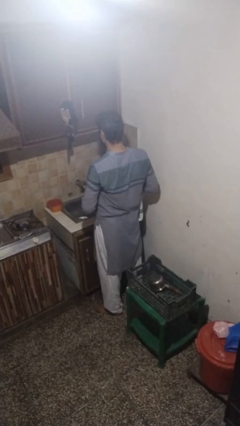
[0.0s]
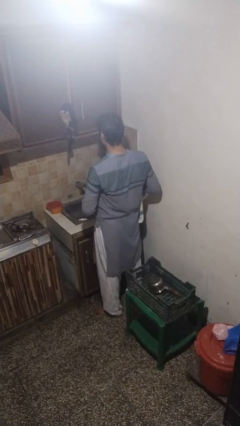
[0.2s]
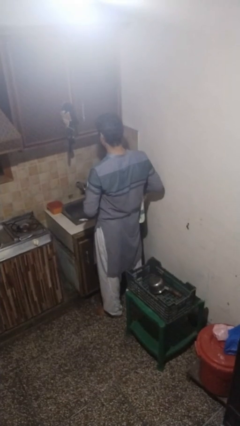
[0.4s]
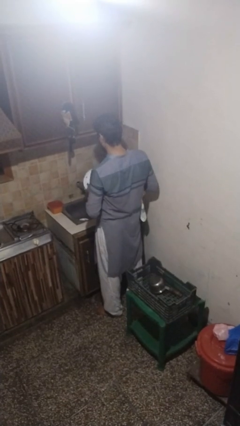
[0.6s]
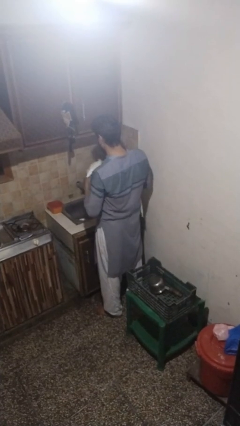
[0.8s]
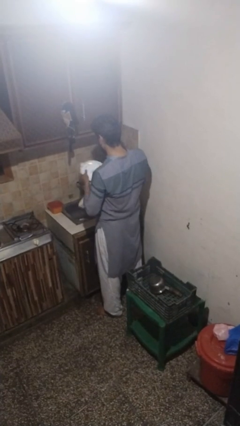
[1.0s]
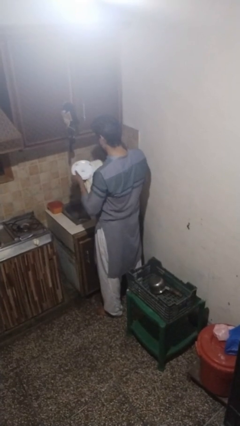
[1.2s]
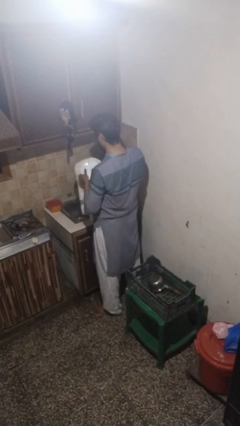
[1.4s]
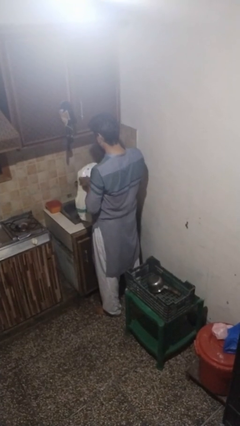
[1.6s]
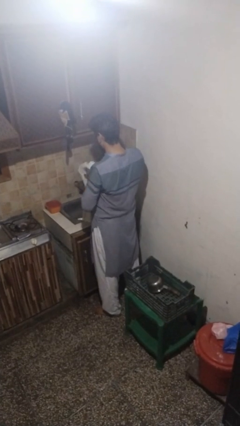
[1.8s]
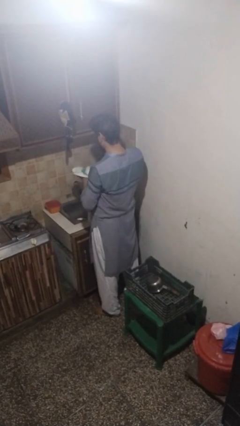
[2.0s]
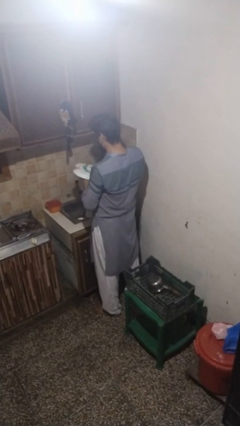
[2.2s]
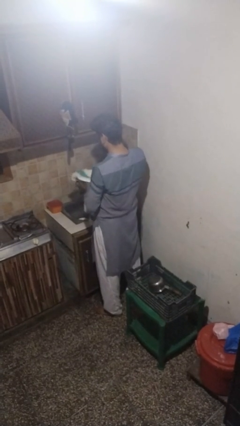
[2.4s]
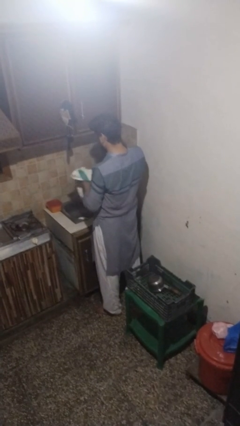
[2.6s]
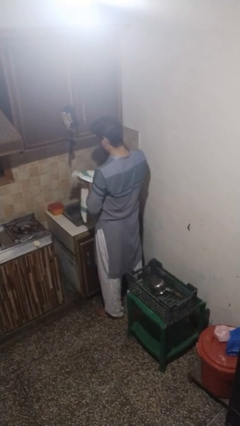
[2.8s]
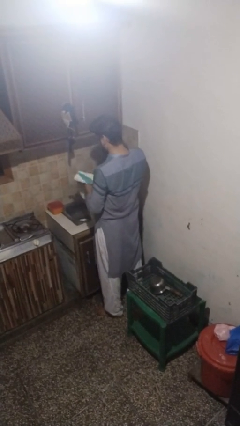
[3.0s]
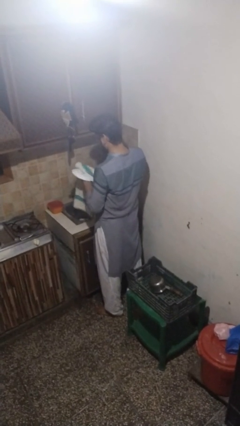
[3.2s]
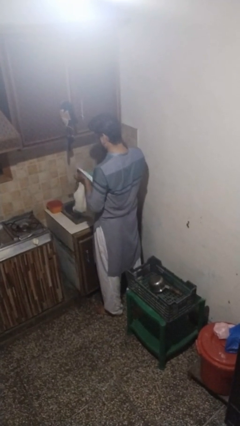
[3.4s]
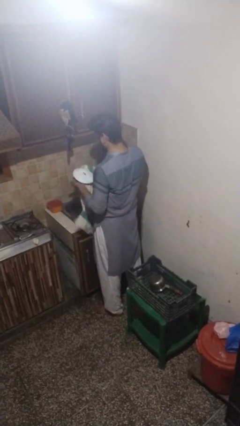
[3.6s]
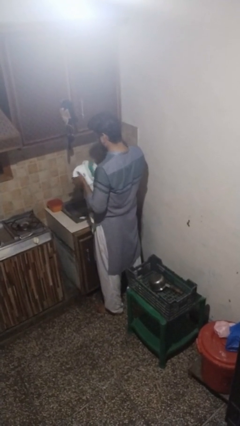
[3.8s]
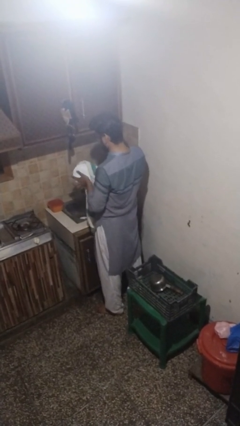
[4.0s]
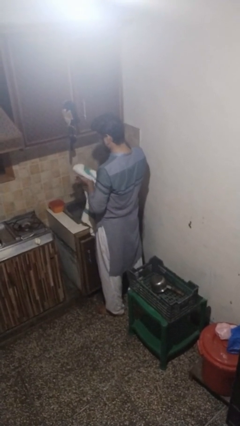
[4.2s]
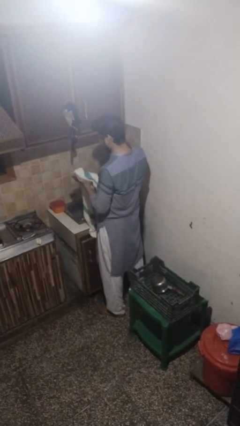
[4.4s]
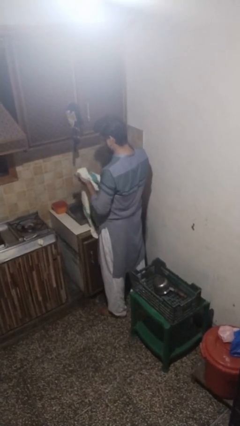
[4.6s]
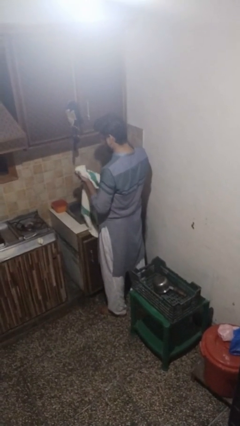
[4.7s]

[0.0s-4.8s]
person dries dish

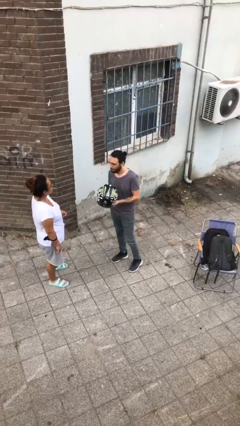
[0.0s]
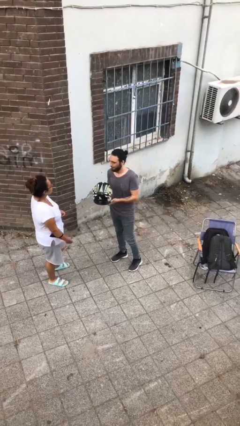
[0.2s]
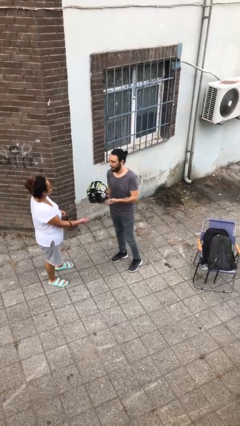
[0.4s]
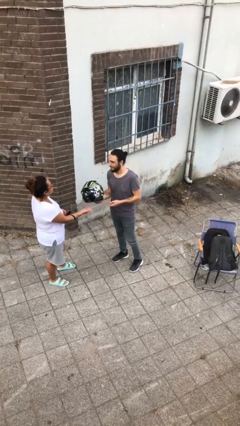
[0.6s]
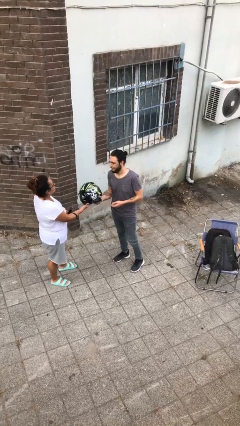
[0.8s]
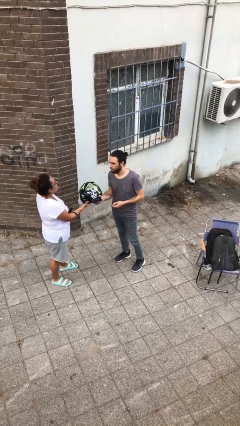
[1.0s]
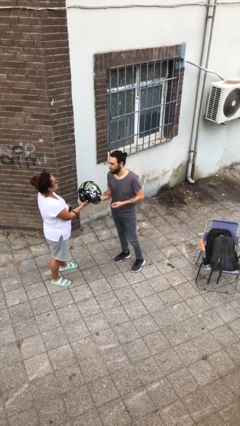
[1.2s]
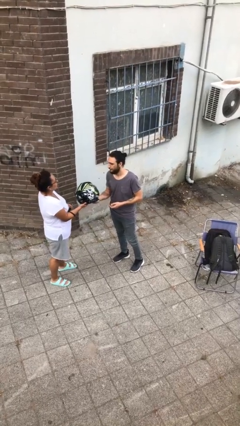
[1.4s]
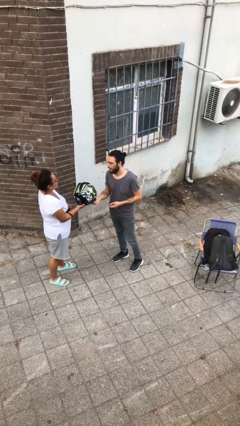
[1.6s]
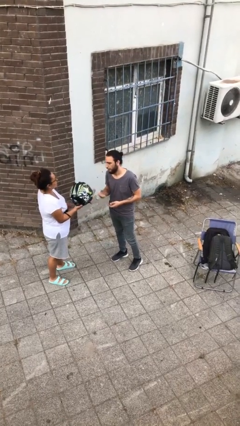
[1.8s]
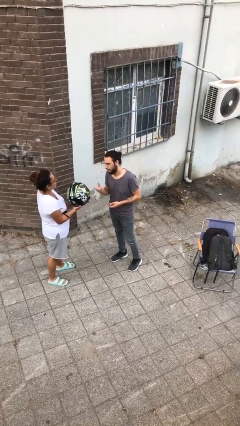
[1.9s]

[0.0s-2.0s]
person transfers object to person

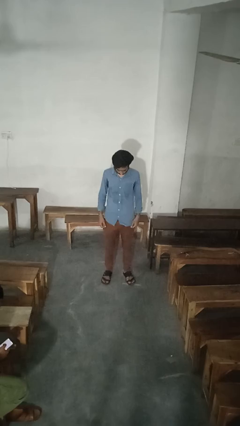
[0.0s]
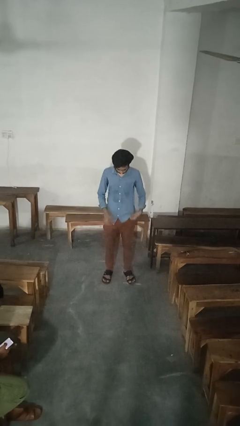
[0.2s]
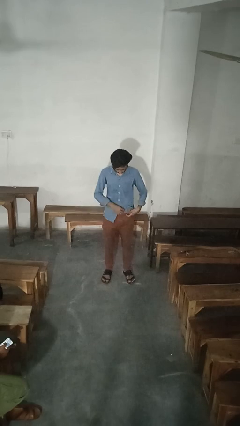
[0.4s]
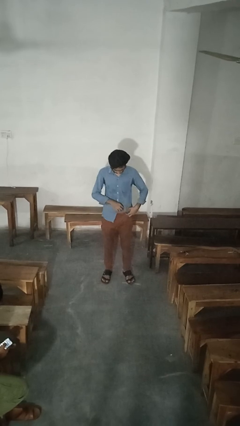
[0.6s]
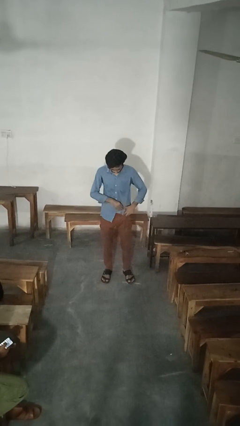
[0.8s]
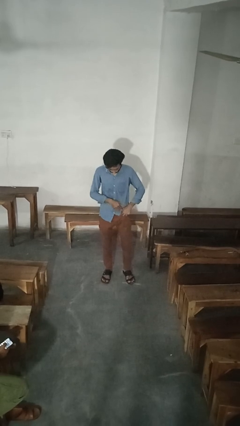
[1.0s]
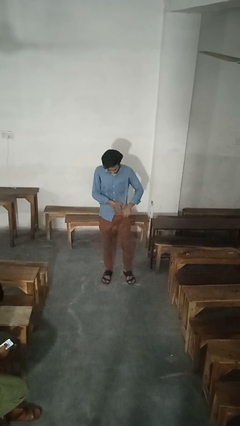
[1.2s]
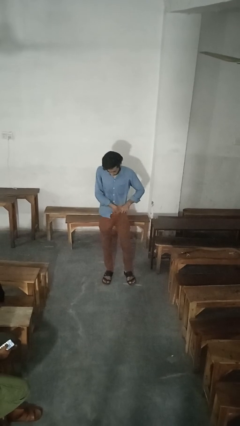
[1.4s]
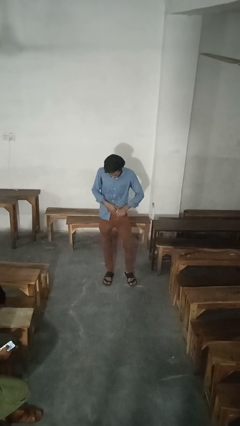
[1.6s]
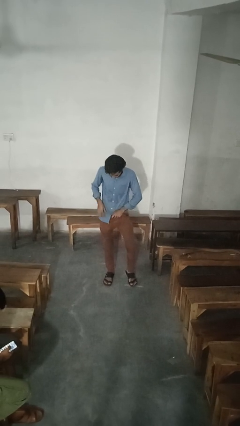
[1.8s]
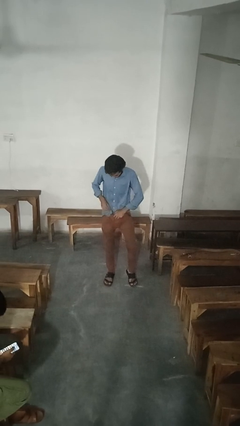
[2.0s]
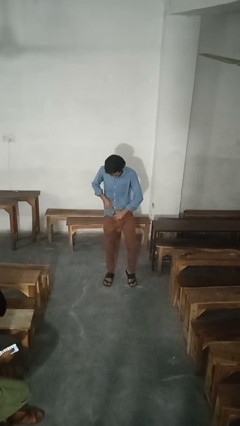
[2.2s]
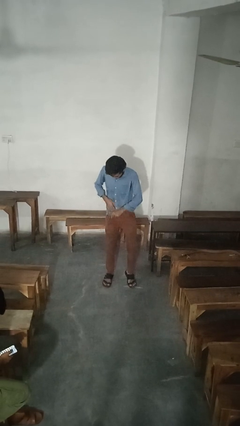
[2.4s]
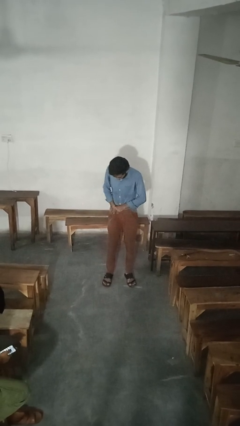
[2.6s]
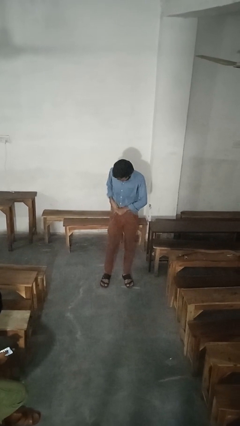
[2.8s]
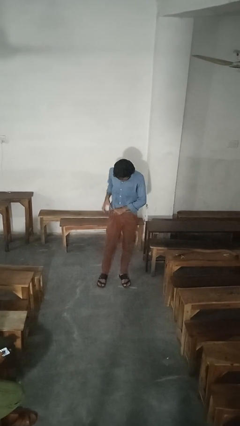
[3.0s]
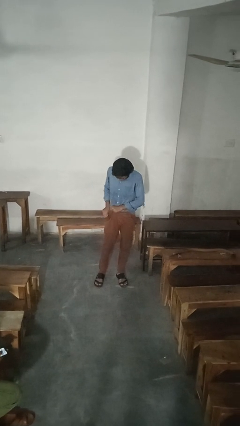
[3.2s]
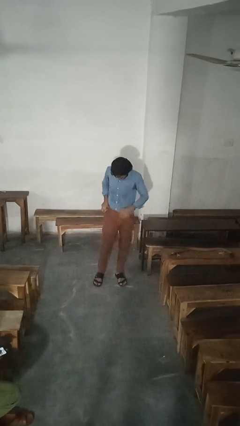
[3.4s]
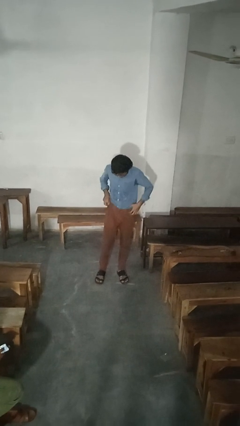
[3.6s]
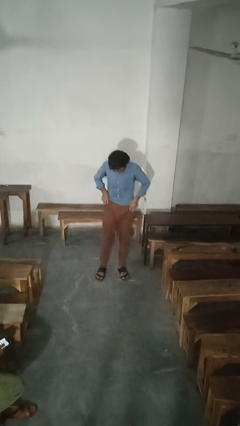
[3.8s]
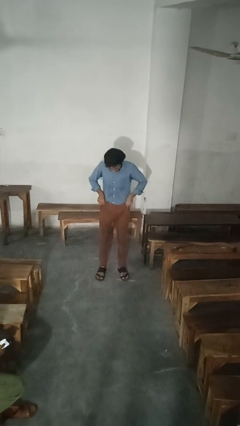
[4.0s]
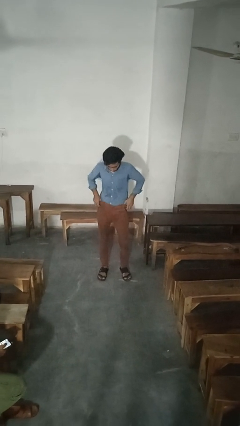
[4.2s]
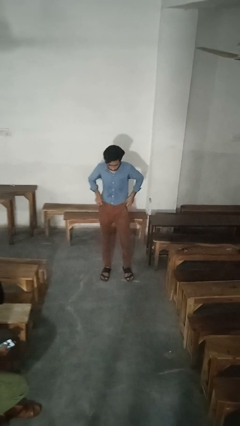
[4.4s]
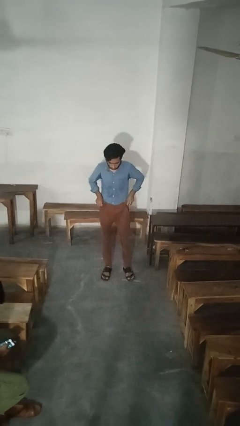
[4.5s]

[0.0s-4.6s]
person tucks in shirt

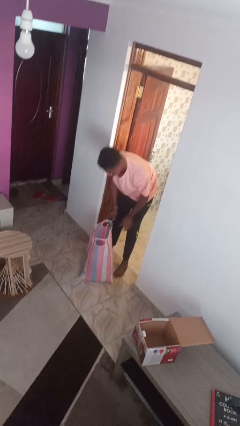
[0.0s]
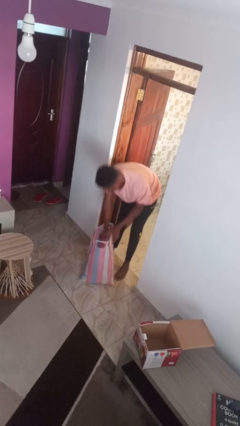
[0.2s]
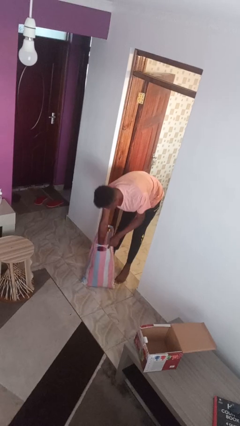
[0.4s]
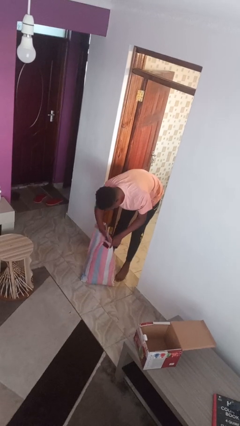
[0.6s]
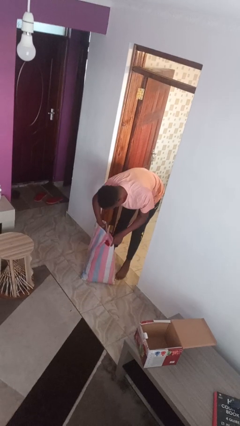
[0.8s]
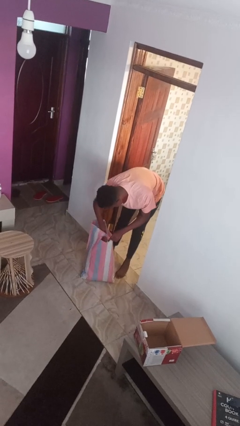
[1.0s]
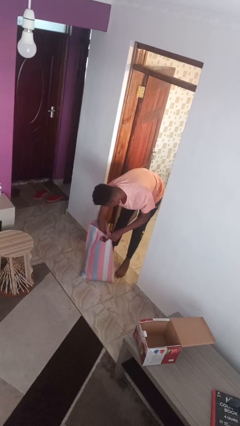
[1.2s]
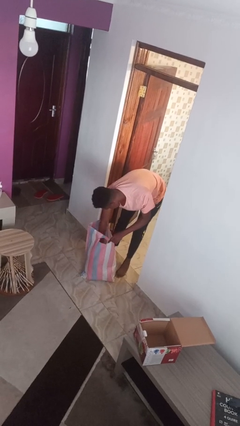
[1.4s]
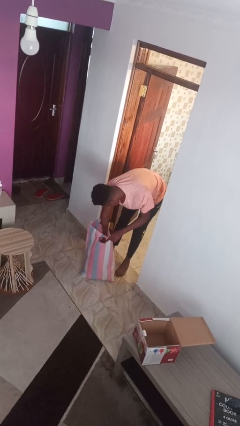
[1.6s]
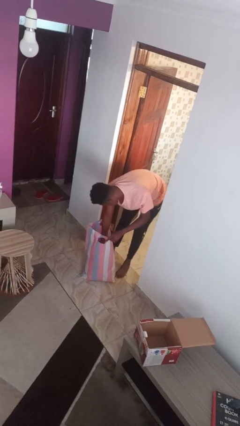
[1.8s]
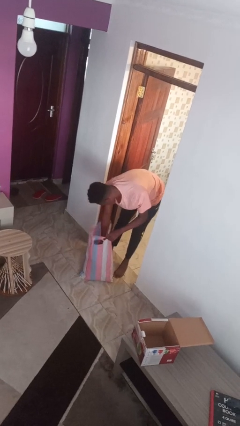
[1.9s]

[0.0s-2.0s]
person searches in bag

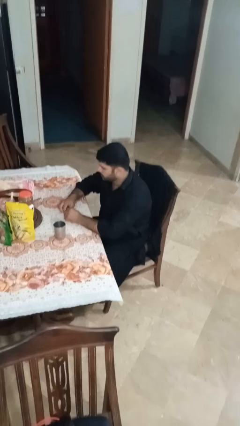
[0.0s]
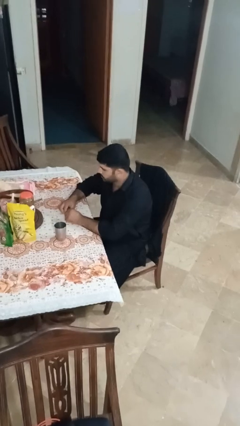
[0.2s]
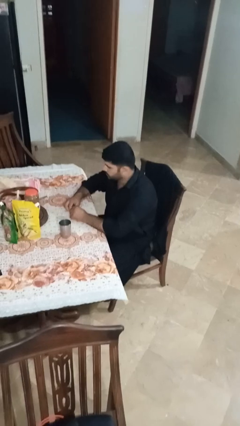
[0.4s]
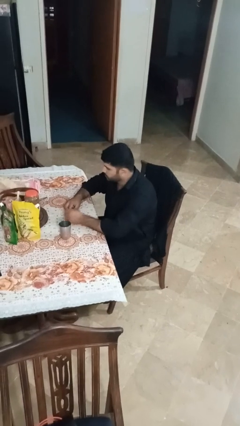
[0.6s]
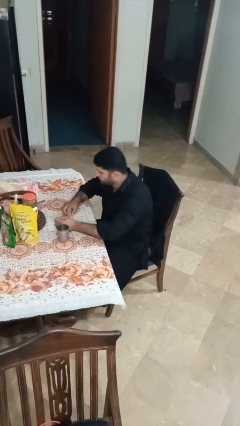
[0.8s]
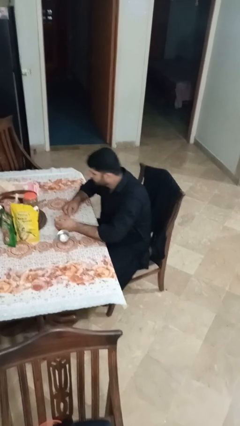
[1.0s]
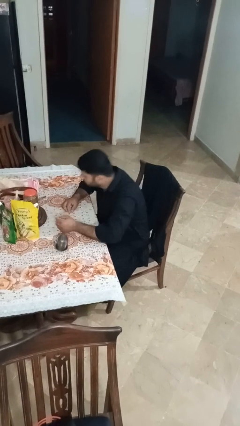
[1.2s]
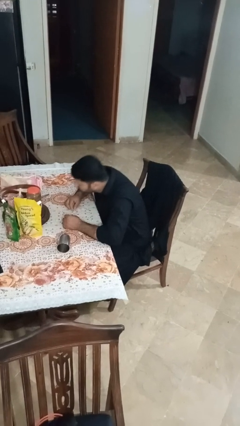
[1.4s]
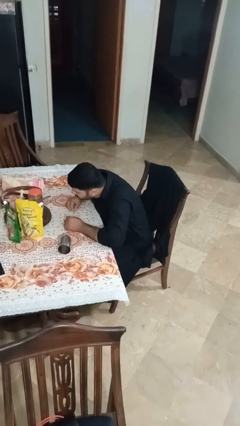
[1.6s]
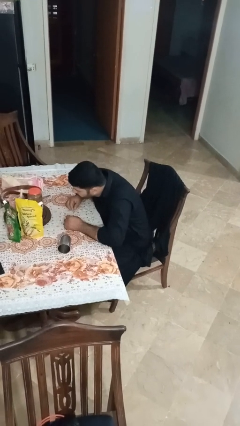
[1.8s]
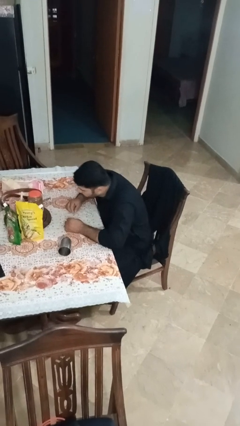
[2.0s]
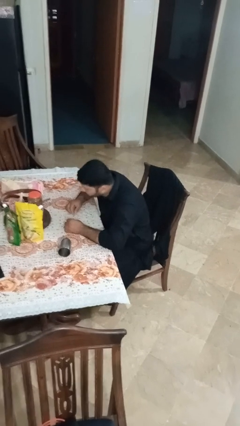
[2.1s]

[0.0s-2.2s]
person knocks over glass

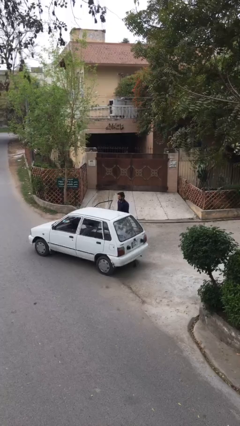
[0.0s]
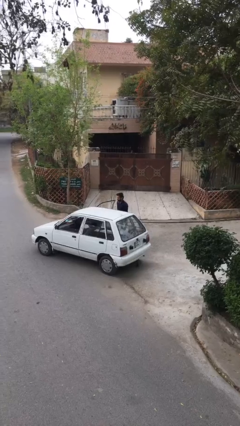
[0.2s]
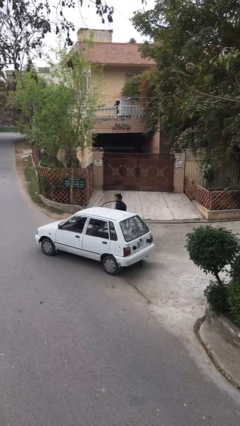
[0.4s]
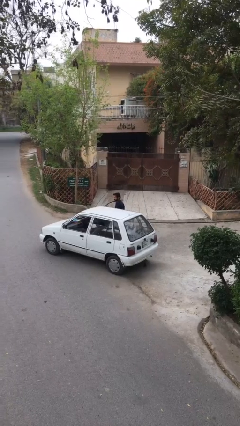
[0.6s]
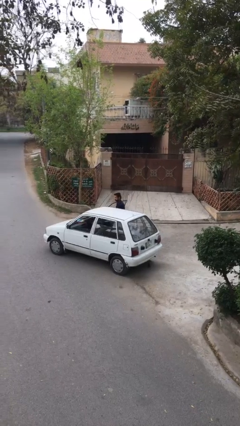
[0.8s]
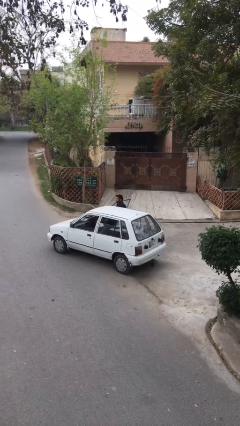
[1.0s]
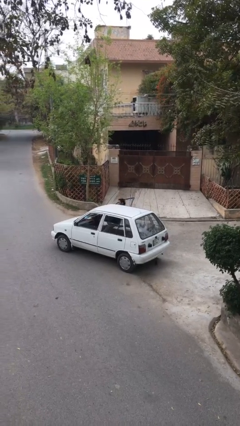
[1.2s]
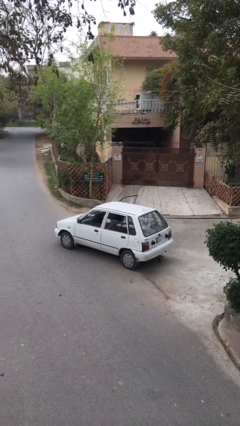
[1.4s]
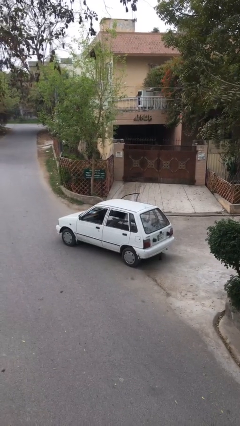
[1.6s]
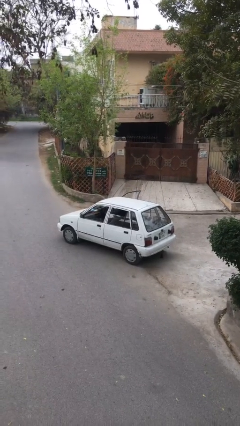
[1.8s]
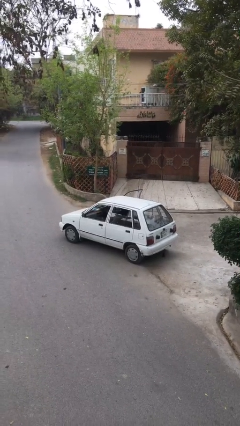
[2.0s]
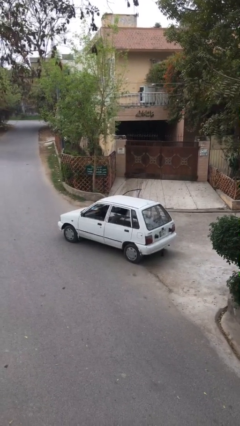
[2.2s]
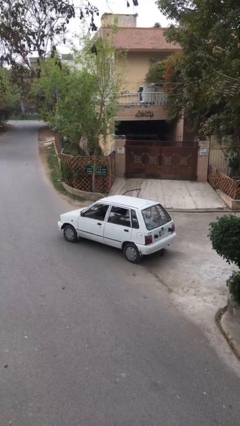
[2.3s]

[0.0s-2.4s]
person enters car
